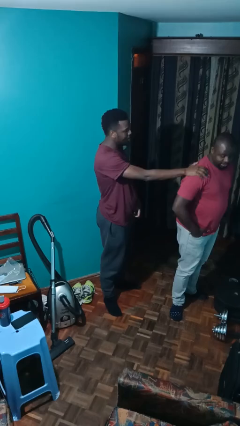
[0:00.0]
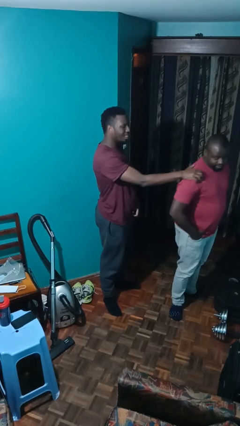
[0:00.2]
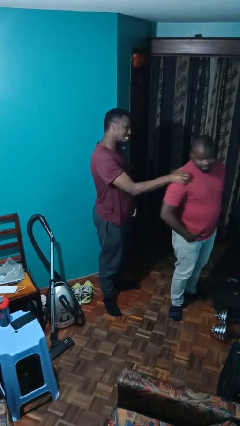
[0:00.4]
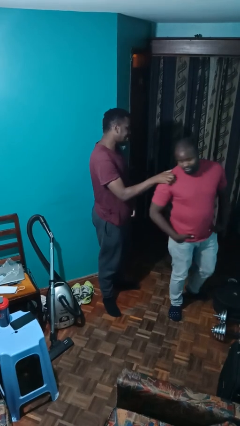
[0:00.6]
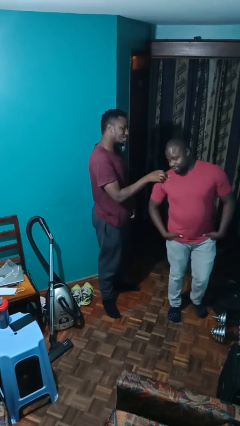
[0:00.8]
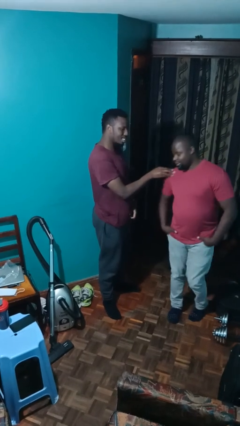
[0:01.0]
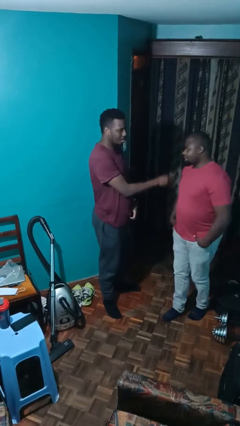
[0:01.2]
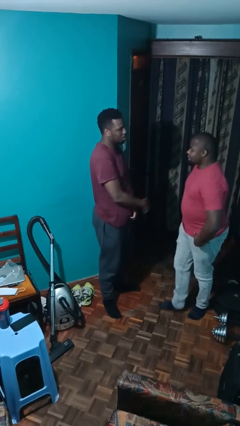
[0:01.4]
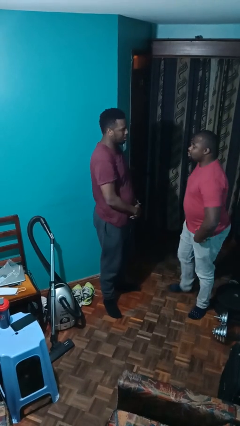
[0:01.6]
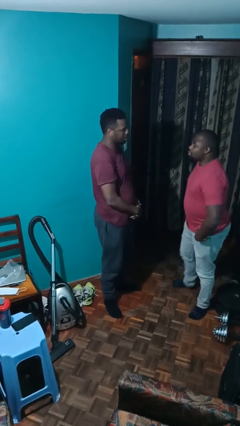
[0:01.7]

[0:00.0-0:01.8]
person spins person around

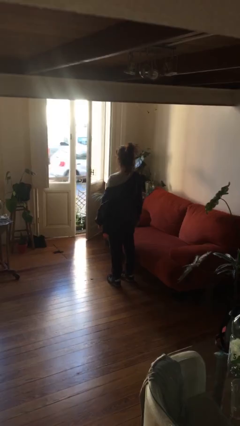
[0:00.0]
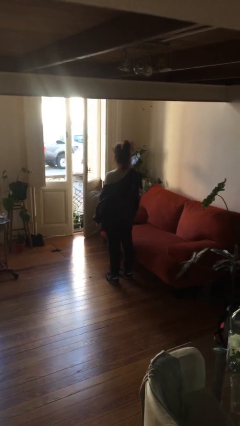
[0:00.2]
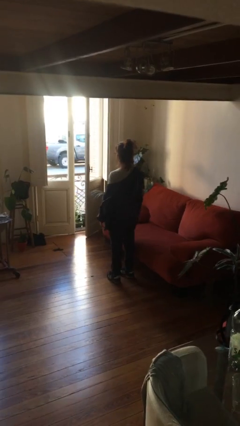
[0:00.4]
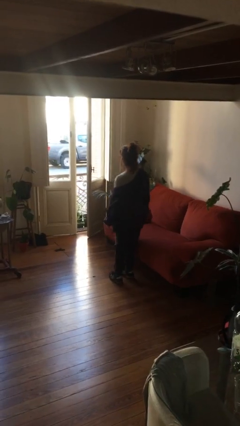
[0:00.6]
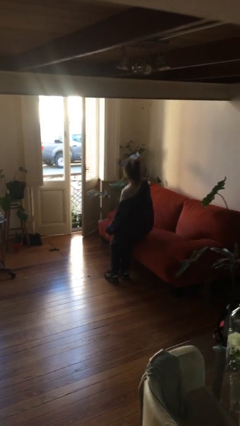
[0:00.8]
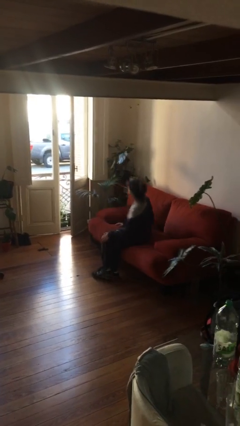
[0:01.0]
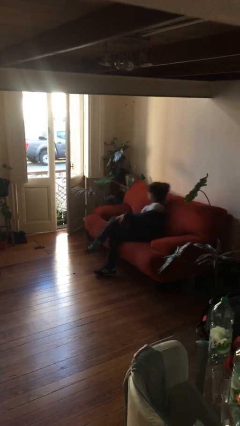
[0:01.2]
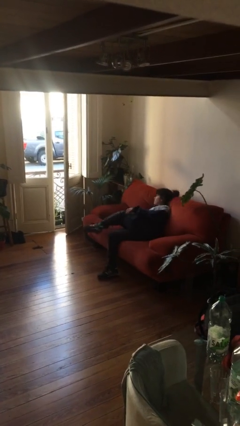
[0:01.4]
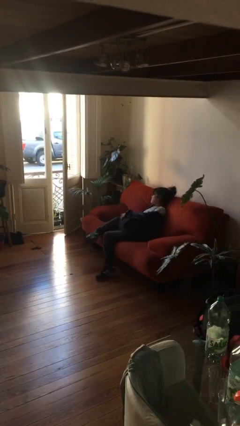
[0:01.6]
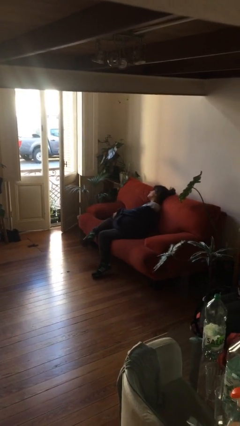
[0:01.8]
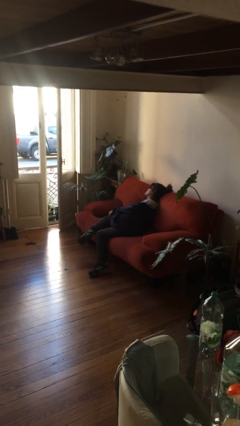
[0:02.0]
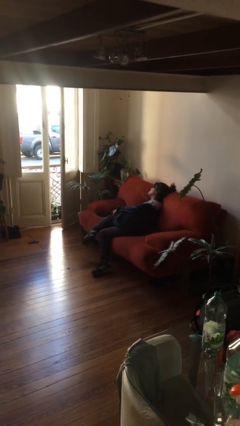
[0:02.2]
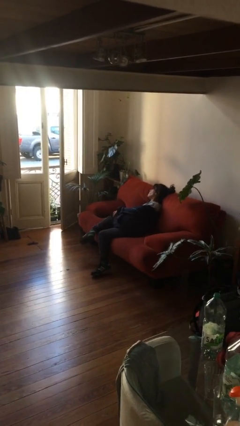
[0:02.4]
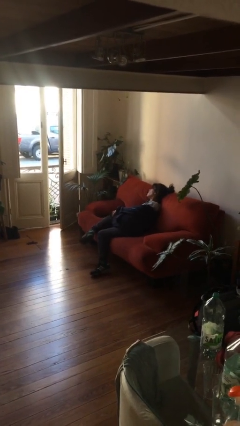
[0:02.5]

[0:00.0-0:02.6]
person lies down on couch

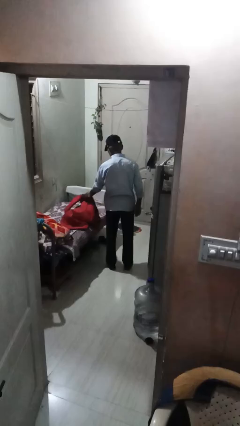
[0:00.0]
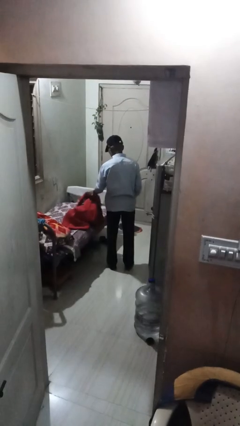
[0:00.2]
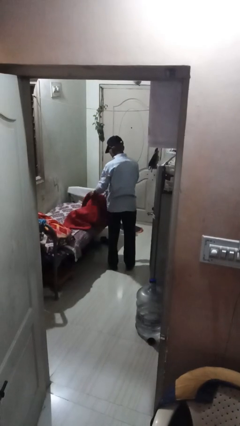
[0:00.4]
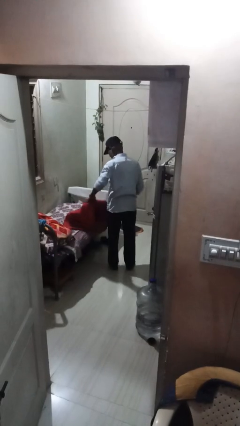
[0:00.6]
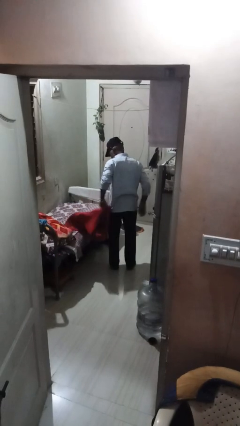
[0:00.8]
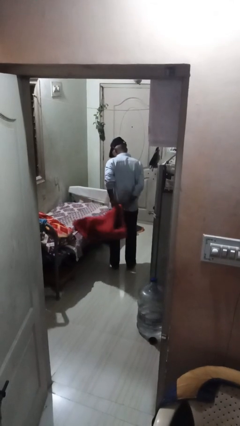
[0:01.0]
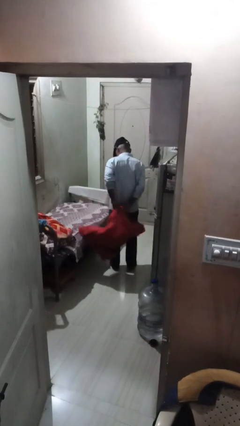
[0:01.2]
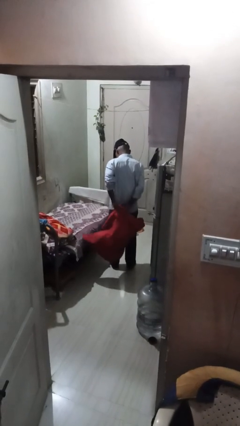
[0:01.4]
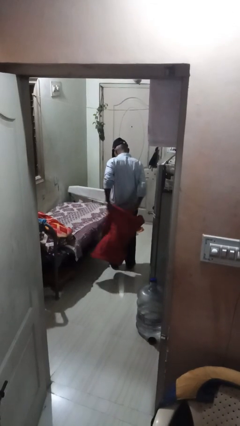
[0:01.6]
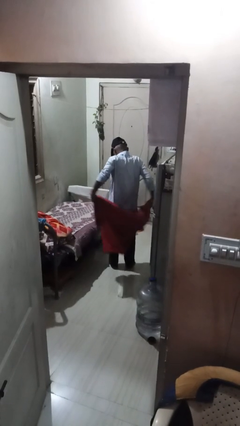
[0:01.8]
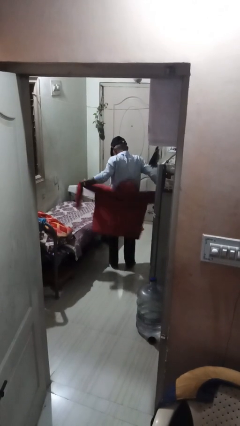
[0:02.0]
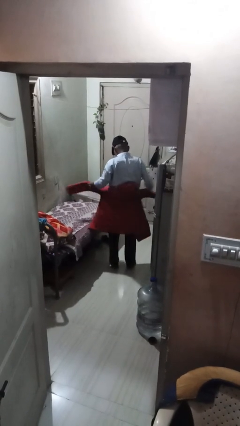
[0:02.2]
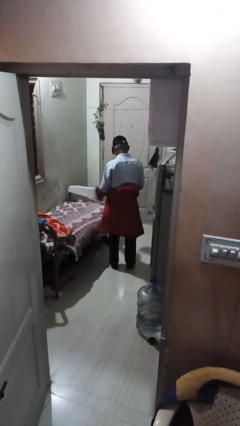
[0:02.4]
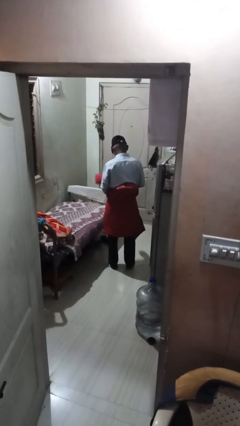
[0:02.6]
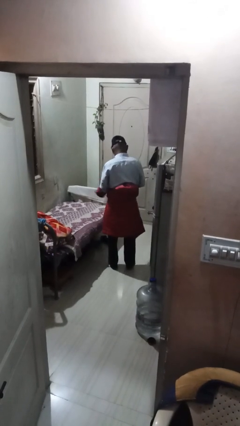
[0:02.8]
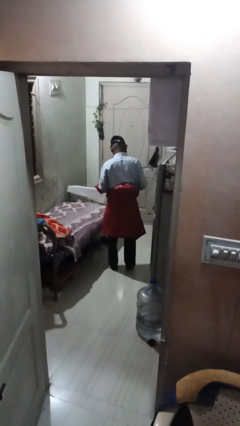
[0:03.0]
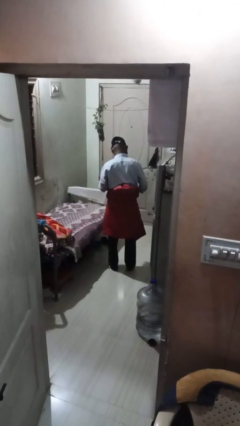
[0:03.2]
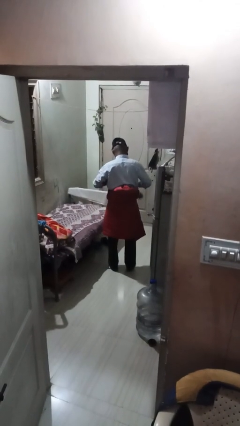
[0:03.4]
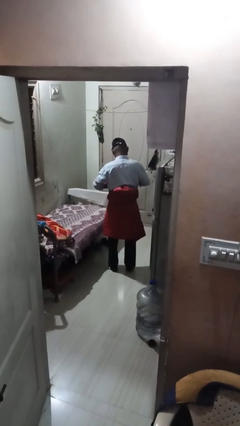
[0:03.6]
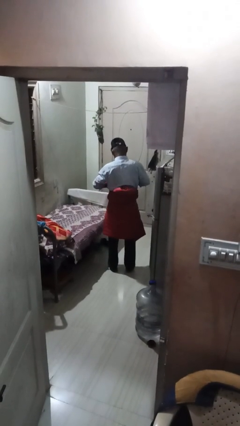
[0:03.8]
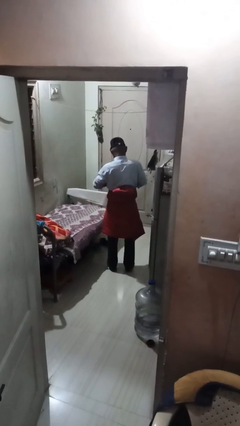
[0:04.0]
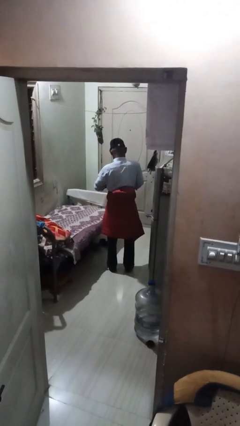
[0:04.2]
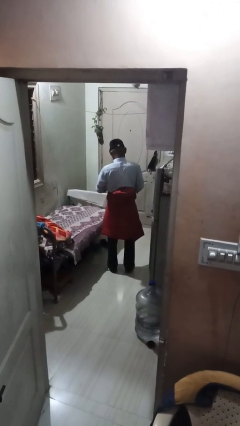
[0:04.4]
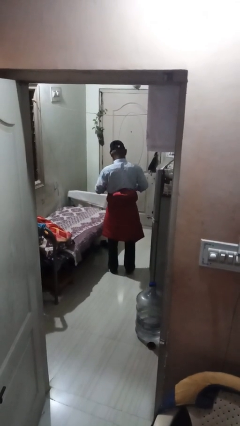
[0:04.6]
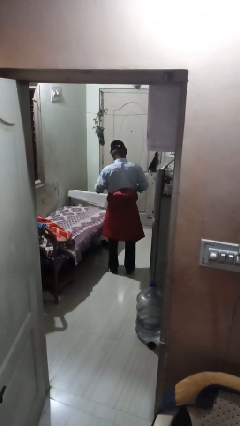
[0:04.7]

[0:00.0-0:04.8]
person ties jacket around waist

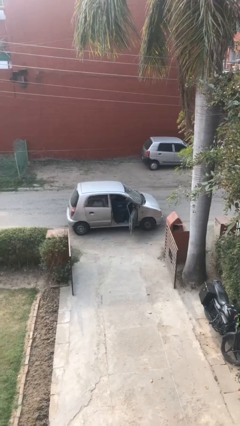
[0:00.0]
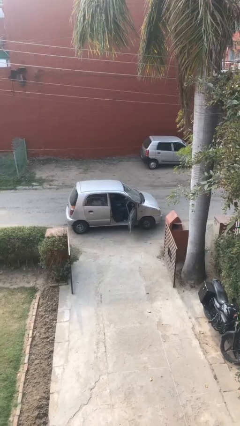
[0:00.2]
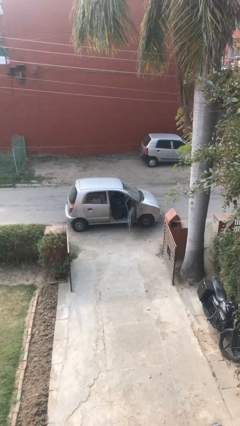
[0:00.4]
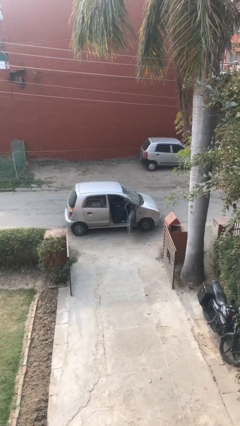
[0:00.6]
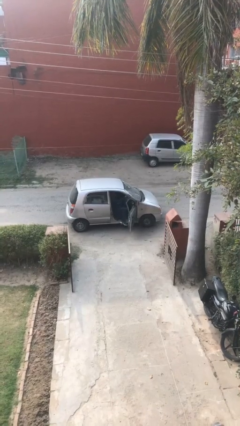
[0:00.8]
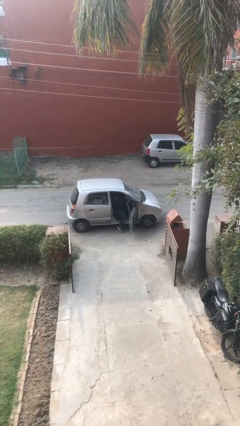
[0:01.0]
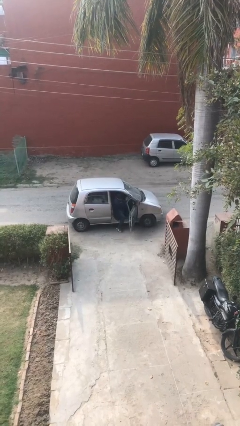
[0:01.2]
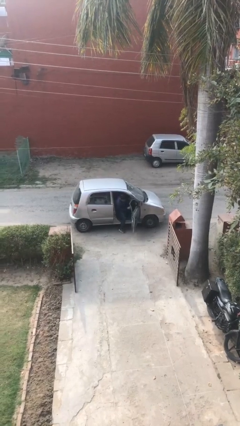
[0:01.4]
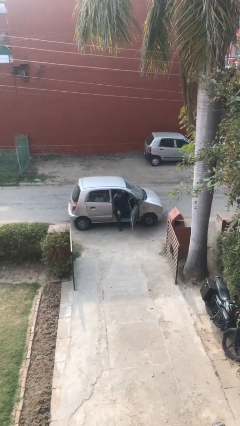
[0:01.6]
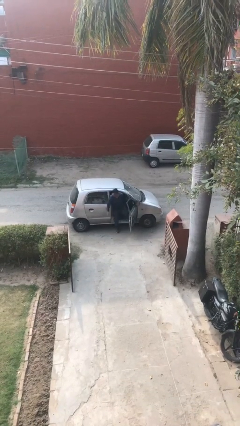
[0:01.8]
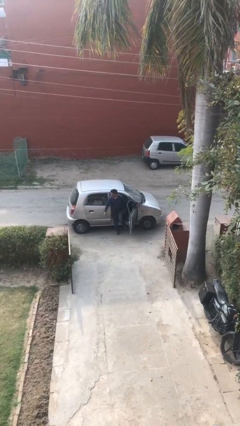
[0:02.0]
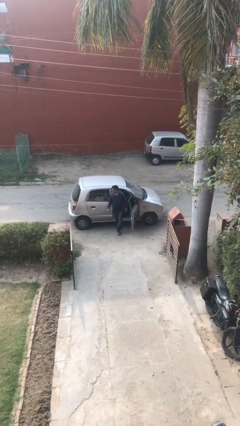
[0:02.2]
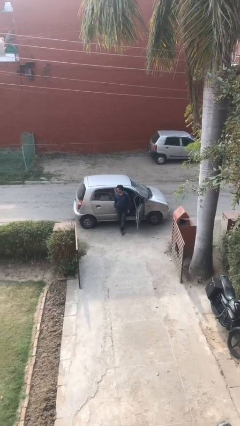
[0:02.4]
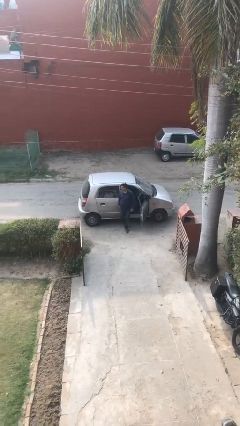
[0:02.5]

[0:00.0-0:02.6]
person exits car

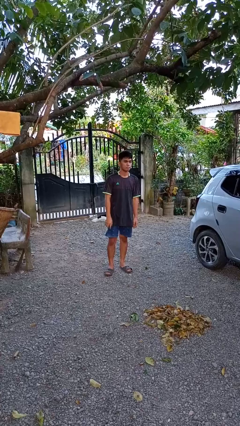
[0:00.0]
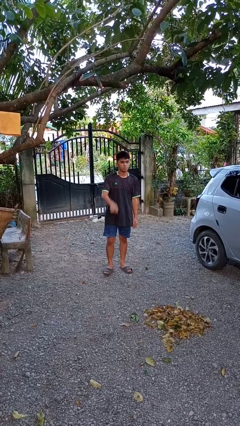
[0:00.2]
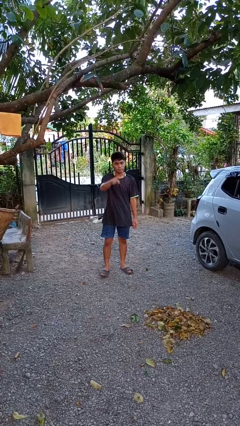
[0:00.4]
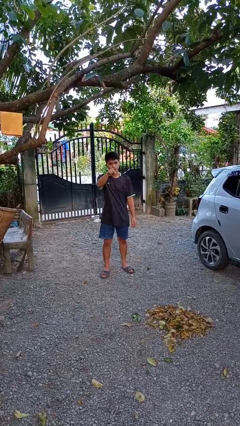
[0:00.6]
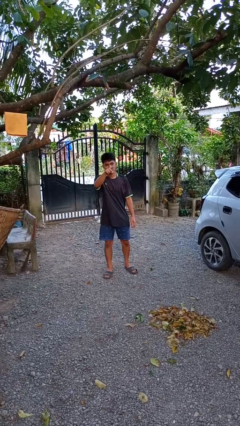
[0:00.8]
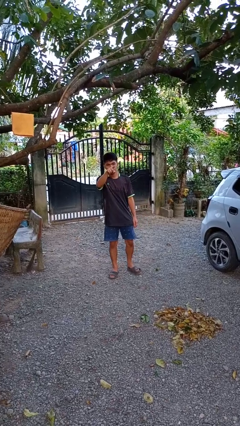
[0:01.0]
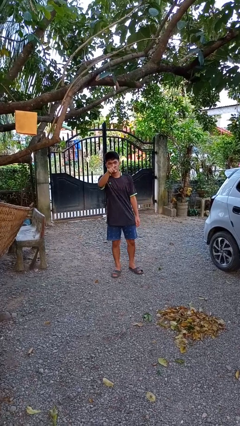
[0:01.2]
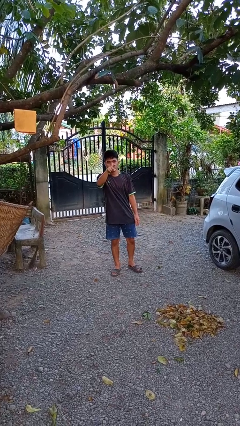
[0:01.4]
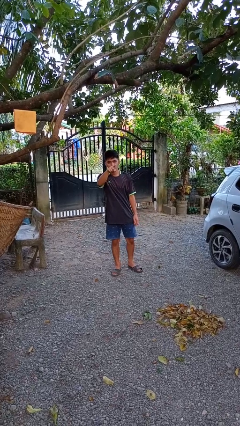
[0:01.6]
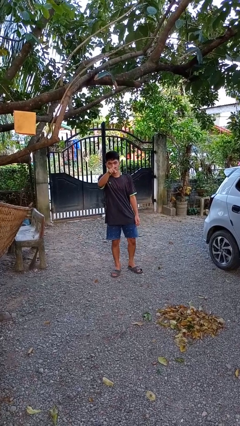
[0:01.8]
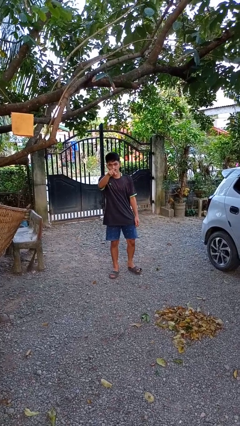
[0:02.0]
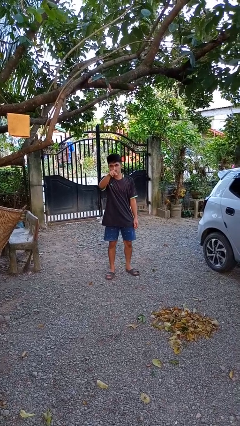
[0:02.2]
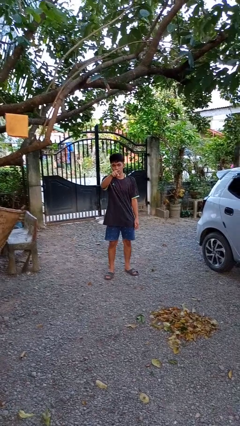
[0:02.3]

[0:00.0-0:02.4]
person points at person

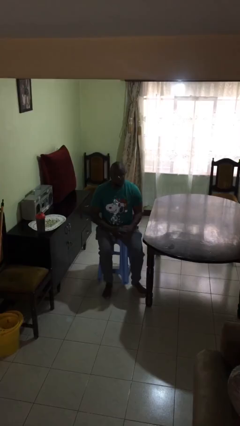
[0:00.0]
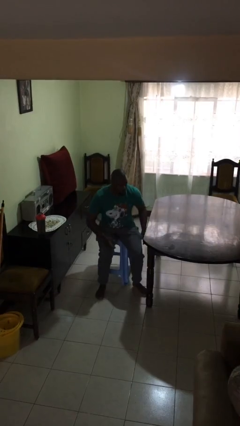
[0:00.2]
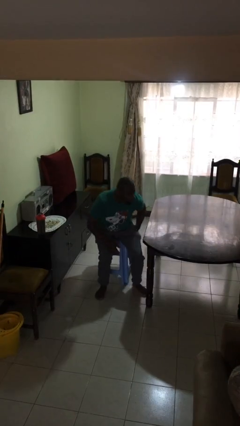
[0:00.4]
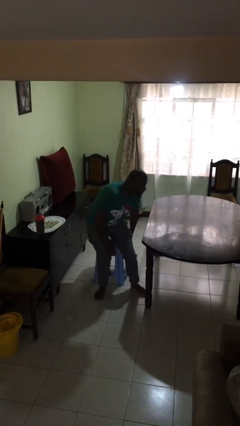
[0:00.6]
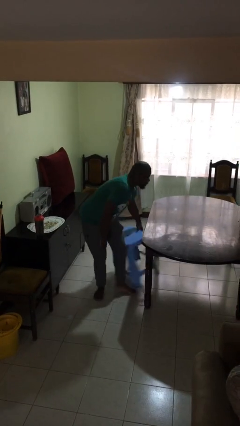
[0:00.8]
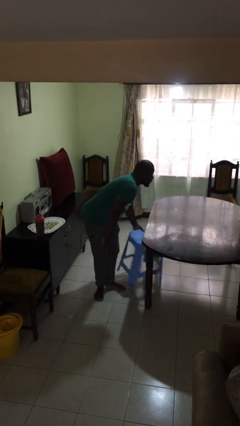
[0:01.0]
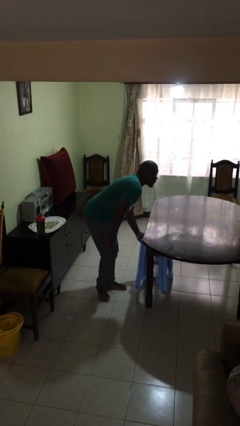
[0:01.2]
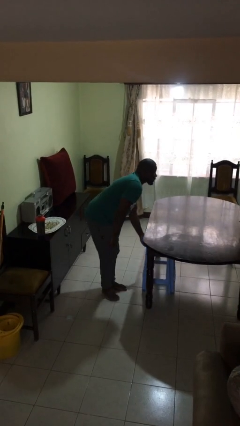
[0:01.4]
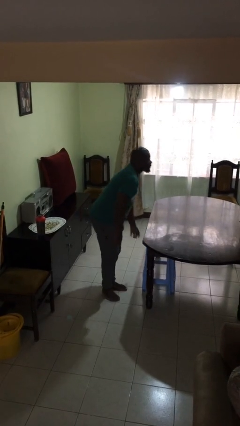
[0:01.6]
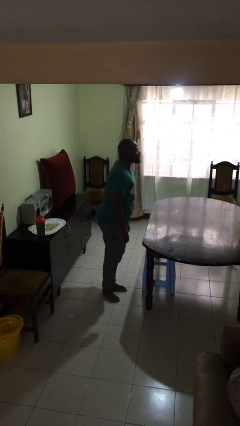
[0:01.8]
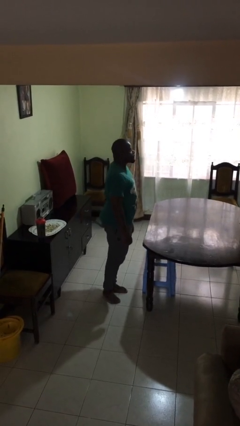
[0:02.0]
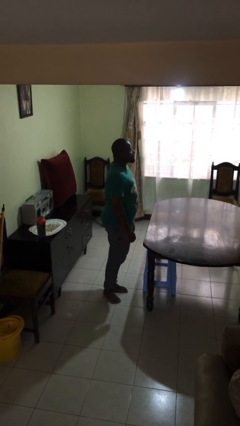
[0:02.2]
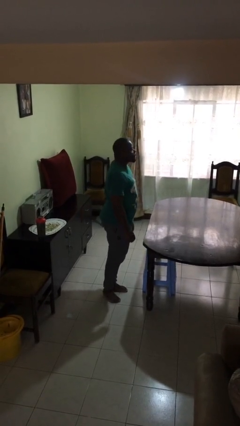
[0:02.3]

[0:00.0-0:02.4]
person stands up

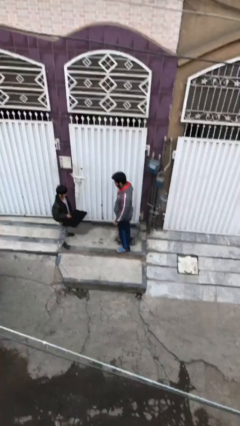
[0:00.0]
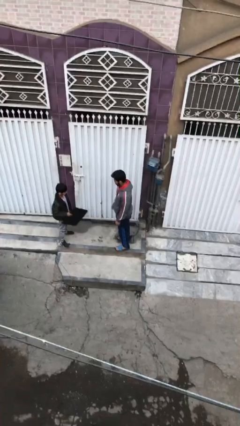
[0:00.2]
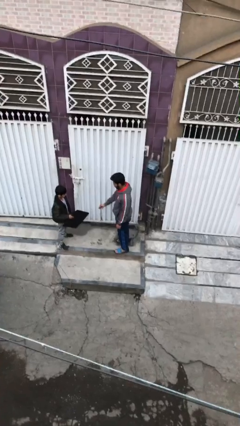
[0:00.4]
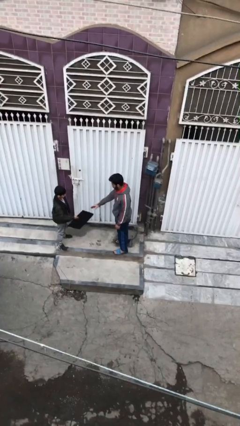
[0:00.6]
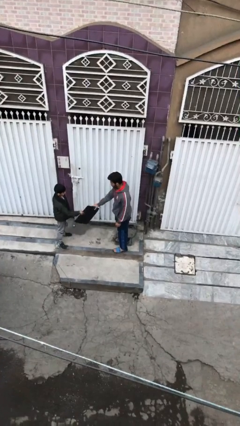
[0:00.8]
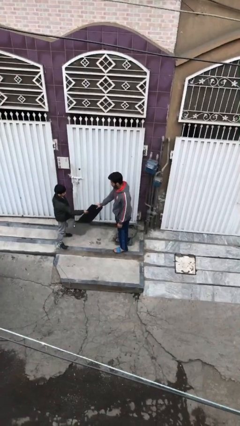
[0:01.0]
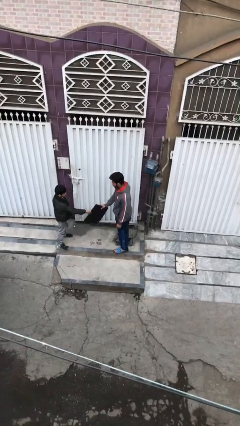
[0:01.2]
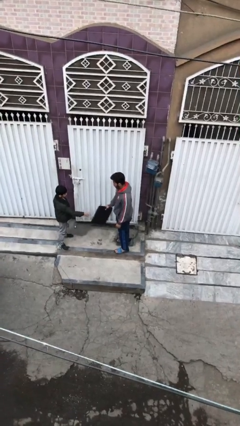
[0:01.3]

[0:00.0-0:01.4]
person transfers object to person
